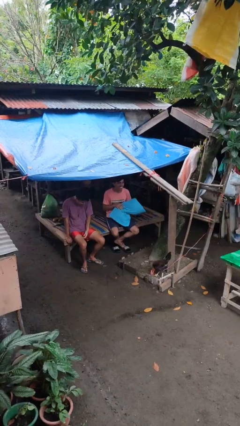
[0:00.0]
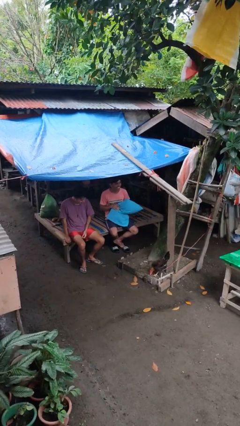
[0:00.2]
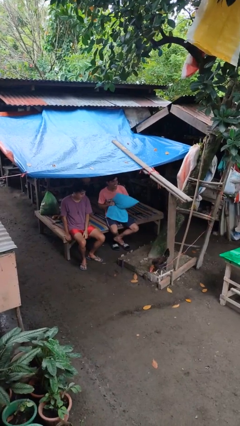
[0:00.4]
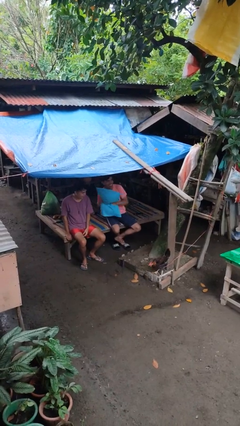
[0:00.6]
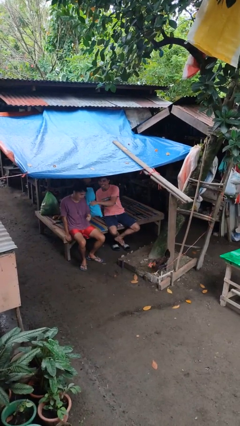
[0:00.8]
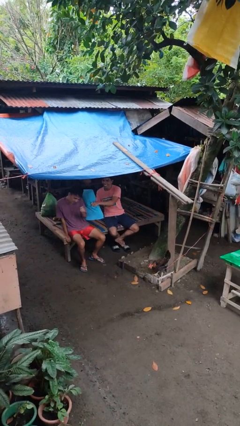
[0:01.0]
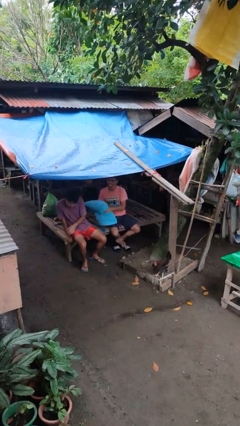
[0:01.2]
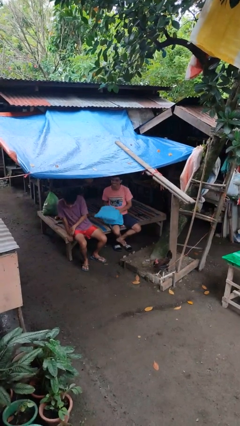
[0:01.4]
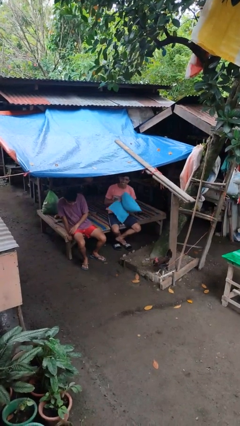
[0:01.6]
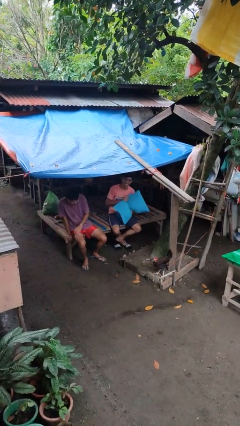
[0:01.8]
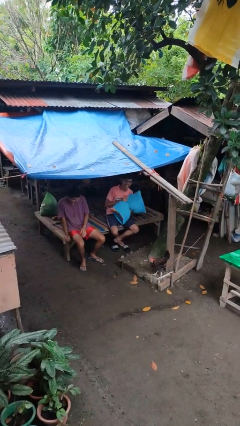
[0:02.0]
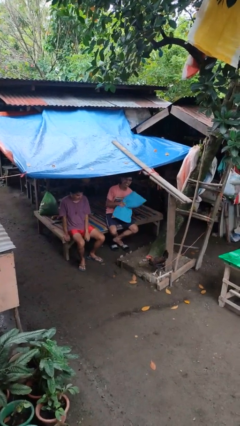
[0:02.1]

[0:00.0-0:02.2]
person hits person with pillow

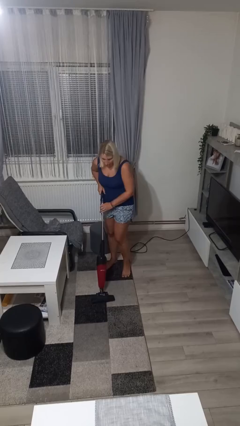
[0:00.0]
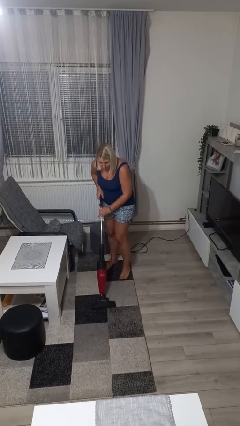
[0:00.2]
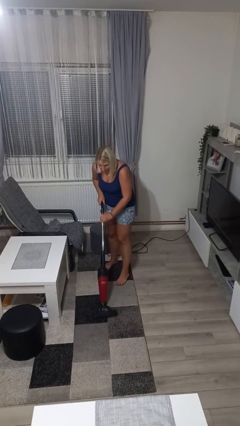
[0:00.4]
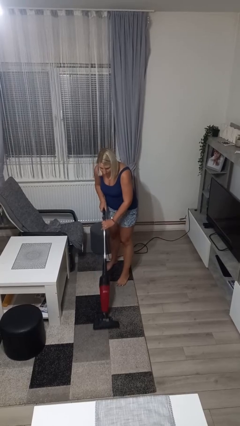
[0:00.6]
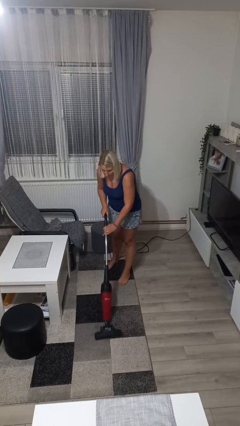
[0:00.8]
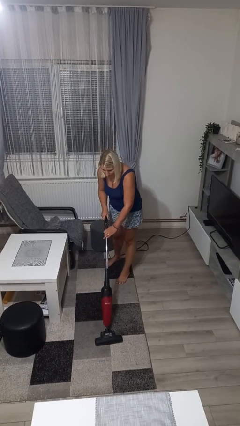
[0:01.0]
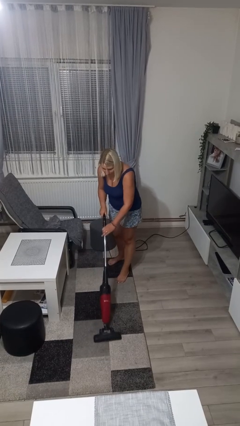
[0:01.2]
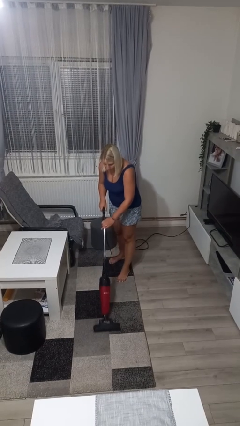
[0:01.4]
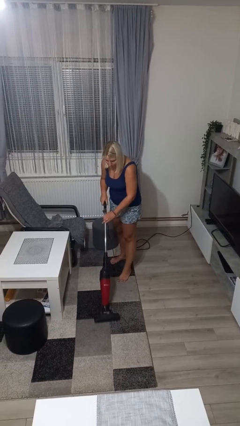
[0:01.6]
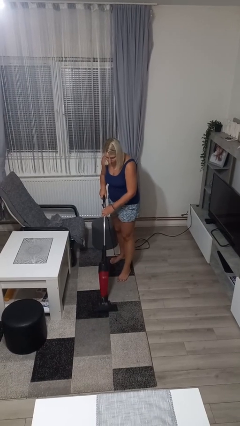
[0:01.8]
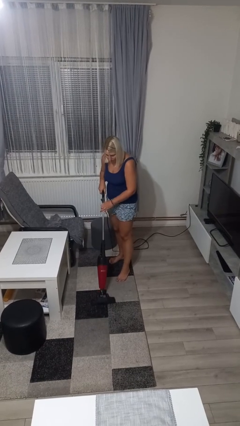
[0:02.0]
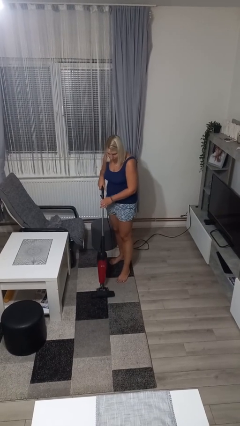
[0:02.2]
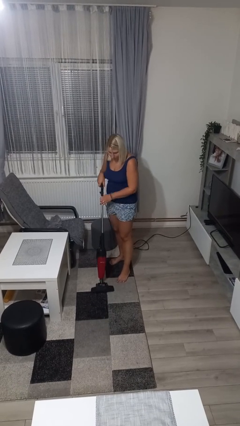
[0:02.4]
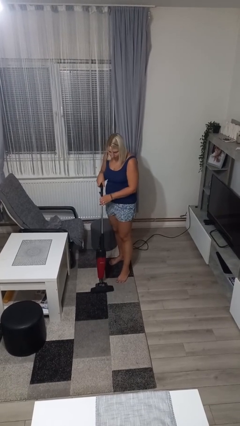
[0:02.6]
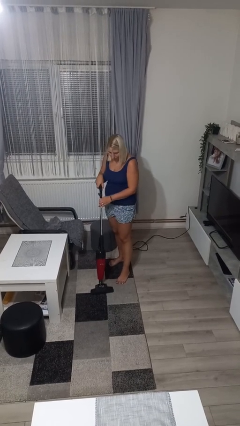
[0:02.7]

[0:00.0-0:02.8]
person vacuums carpet

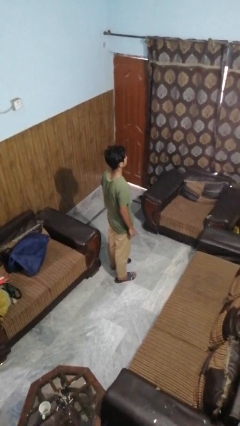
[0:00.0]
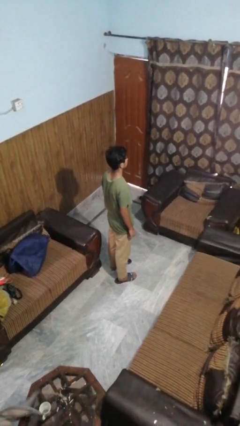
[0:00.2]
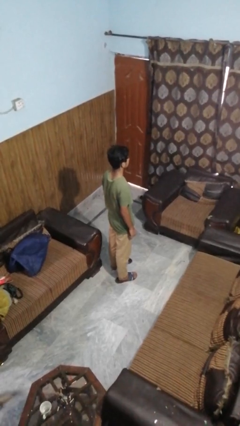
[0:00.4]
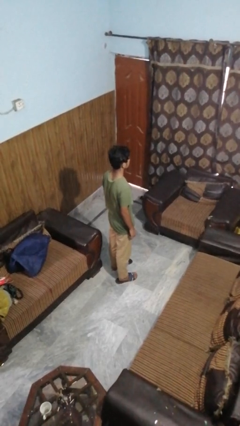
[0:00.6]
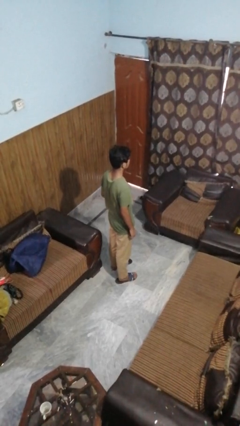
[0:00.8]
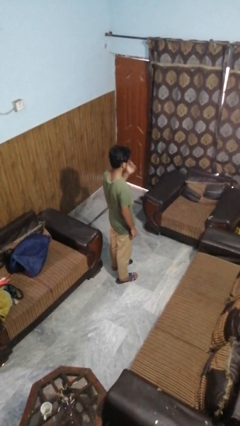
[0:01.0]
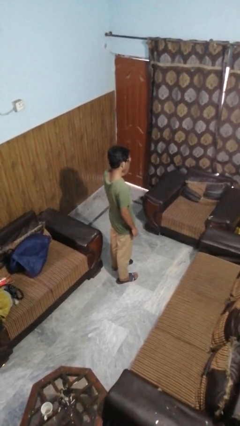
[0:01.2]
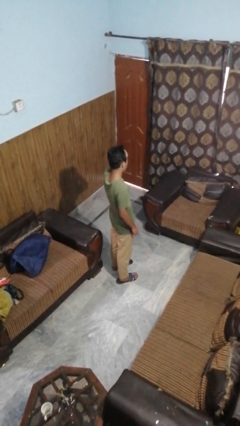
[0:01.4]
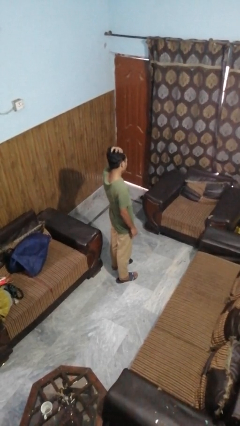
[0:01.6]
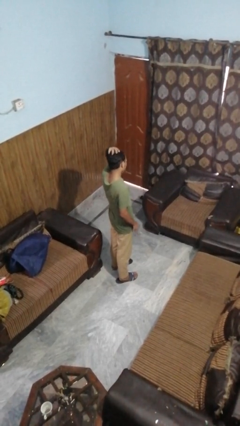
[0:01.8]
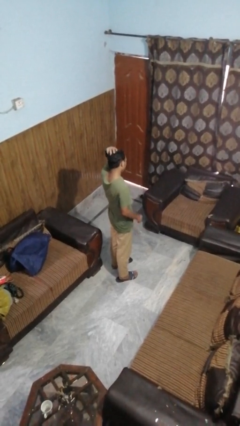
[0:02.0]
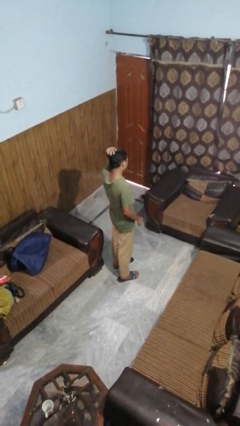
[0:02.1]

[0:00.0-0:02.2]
person strokes hair

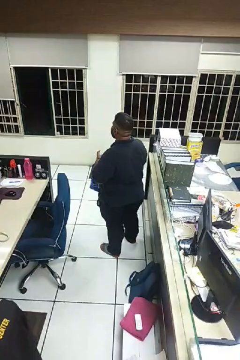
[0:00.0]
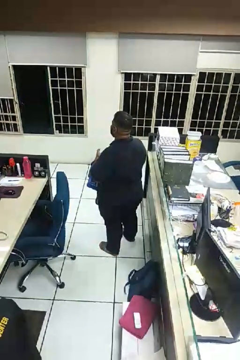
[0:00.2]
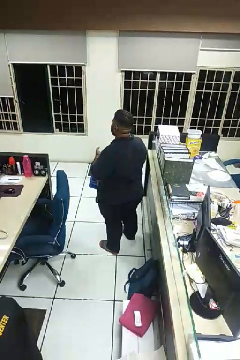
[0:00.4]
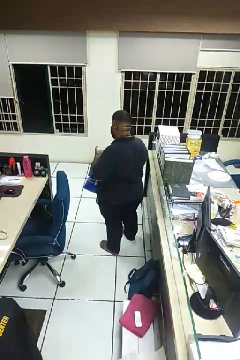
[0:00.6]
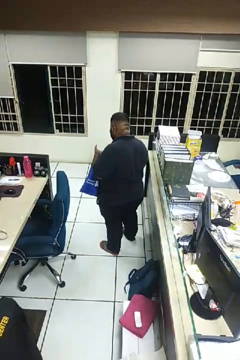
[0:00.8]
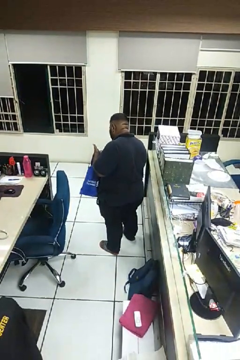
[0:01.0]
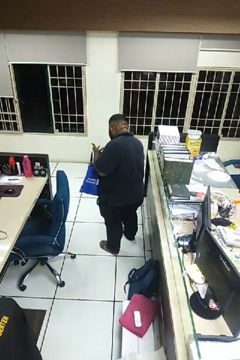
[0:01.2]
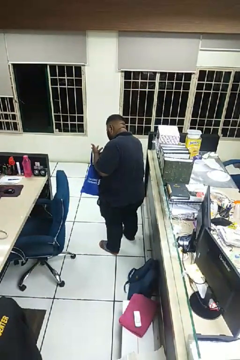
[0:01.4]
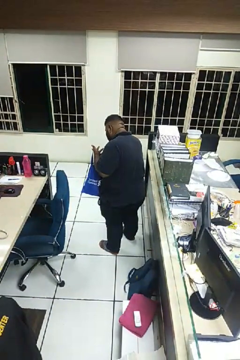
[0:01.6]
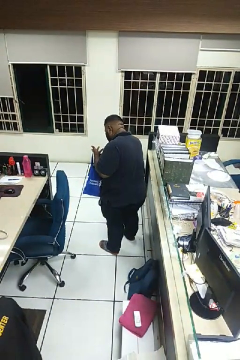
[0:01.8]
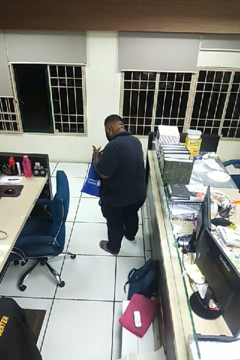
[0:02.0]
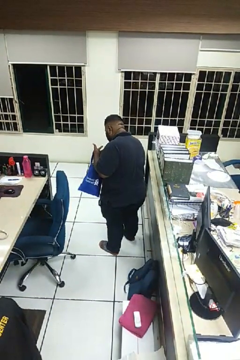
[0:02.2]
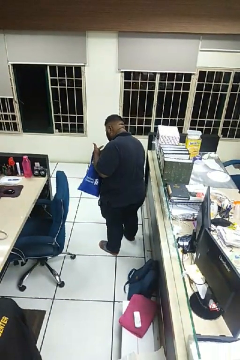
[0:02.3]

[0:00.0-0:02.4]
person searches in bag

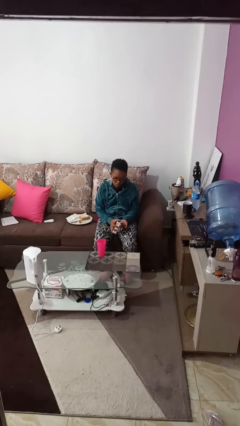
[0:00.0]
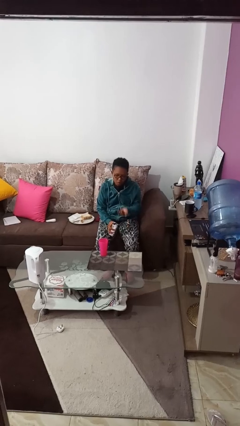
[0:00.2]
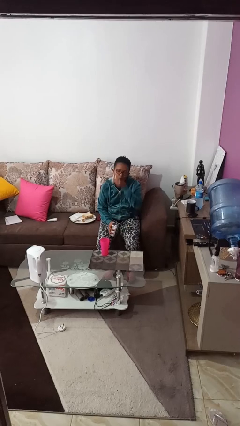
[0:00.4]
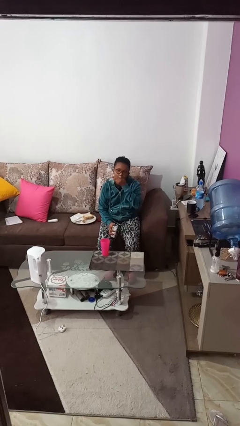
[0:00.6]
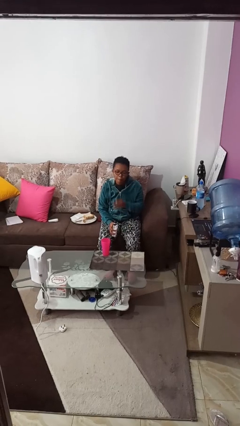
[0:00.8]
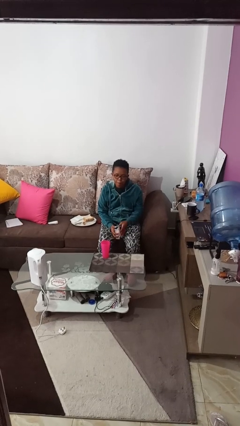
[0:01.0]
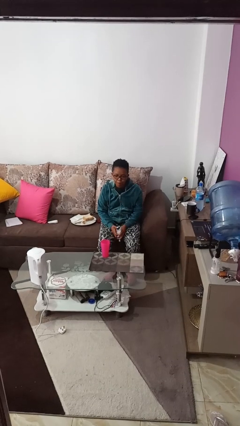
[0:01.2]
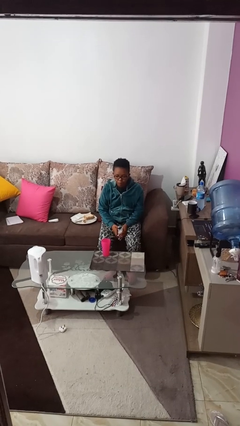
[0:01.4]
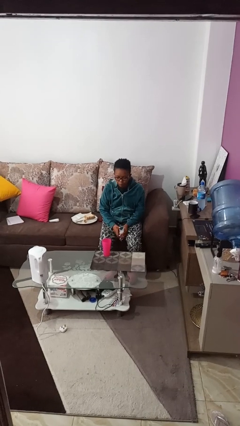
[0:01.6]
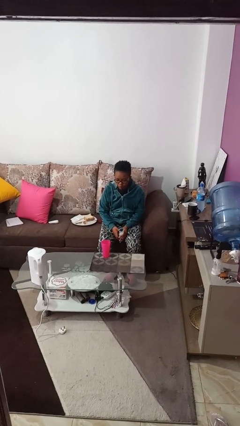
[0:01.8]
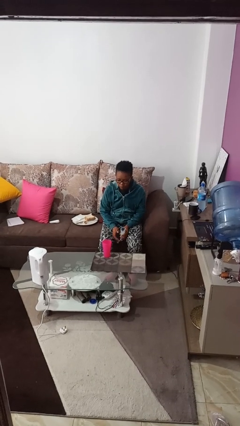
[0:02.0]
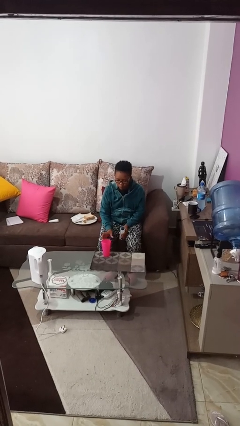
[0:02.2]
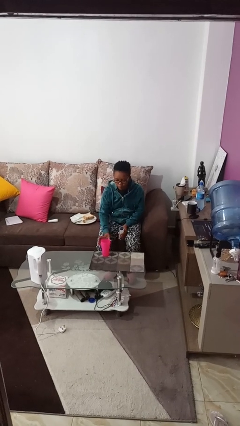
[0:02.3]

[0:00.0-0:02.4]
person takes medicine pills

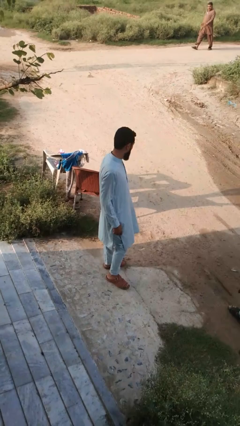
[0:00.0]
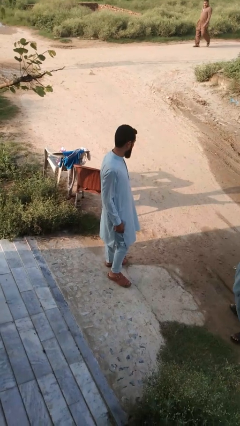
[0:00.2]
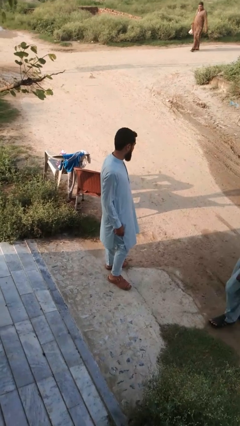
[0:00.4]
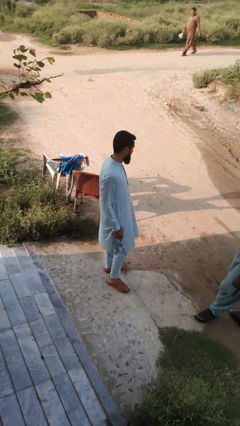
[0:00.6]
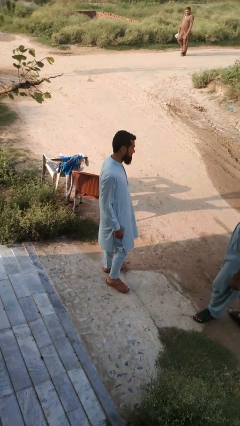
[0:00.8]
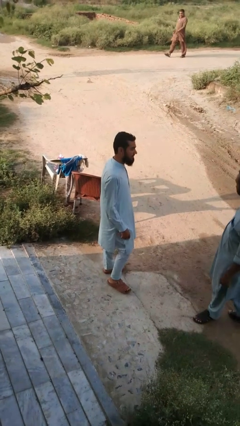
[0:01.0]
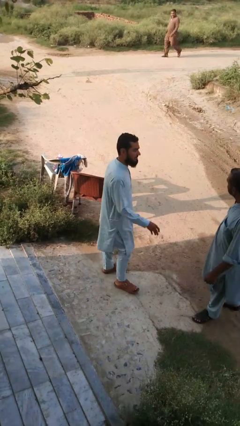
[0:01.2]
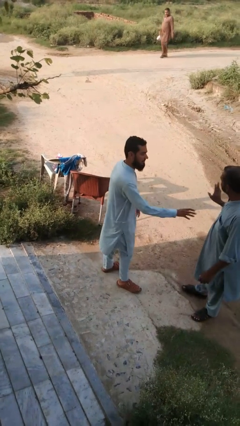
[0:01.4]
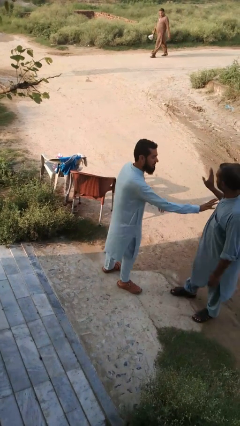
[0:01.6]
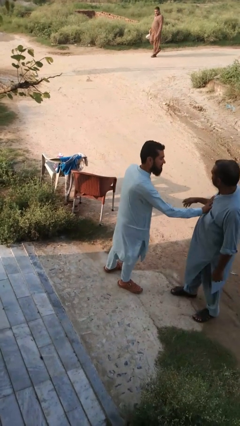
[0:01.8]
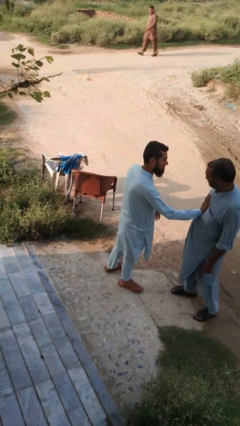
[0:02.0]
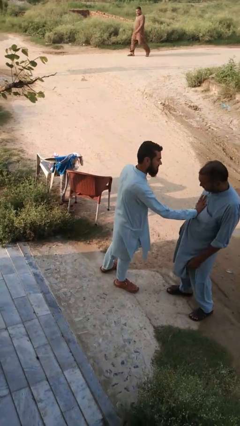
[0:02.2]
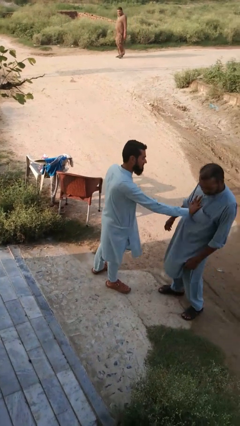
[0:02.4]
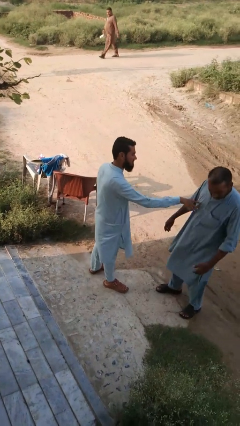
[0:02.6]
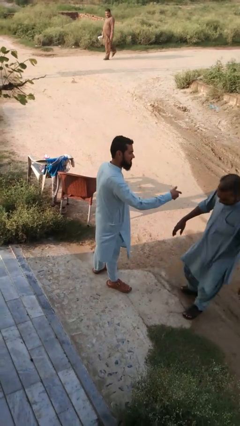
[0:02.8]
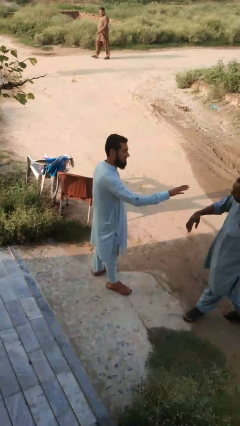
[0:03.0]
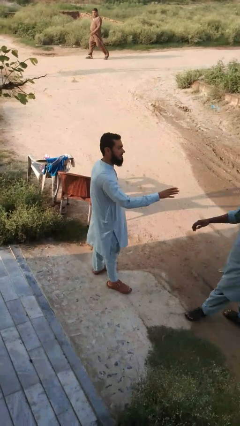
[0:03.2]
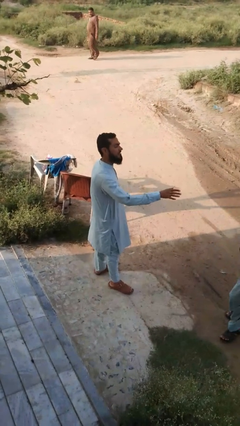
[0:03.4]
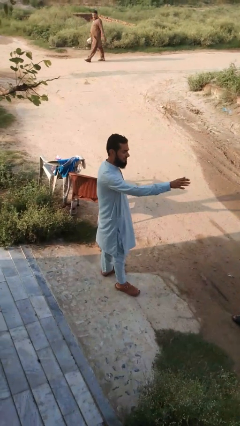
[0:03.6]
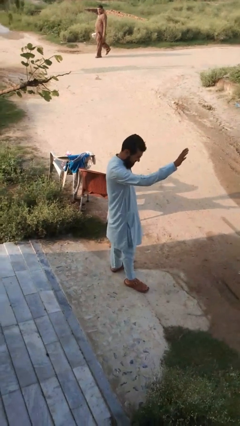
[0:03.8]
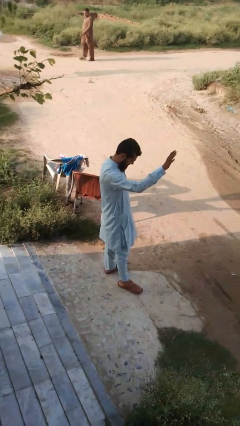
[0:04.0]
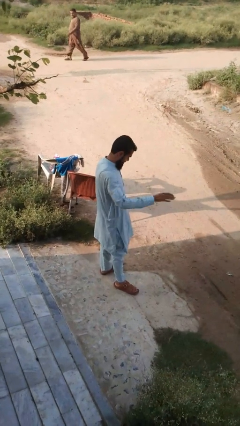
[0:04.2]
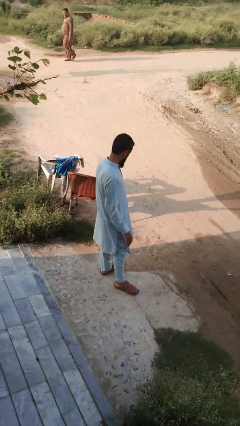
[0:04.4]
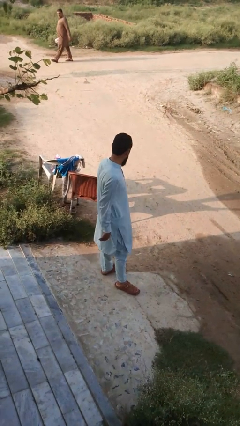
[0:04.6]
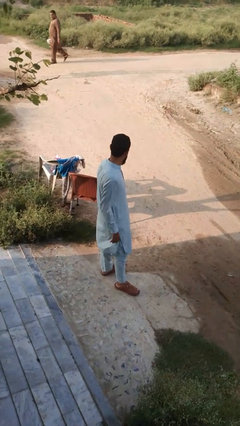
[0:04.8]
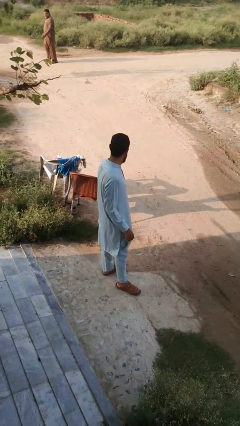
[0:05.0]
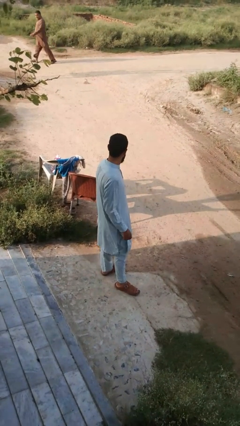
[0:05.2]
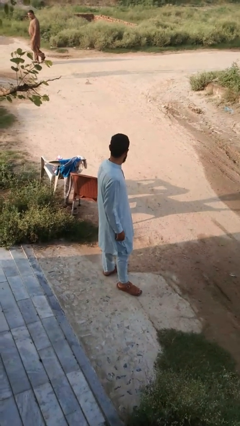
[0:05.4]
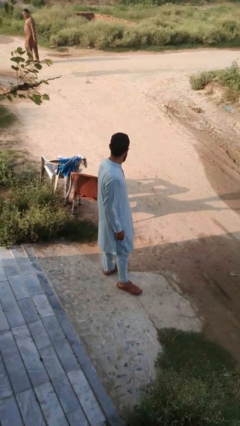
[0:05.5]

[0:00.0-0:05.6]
person shoves person
